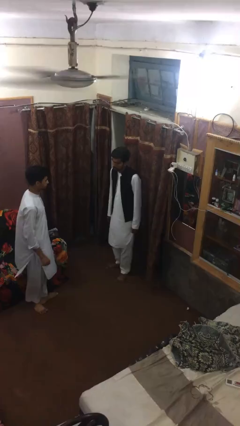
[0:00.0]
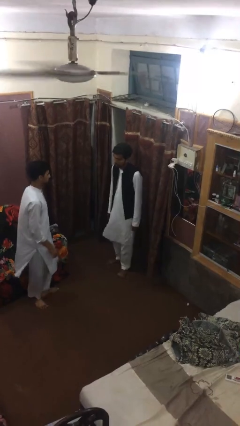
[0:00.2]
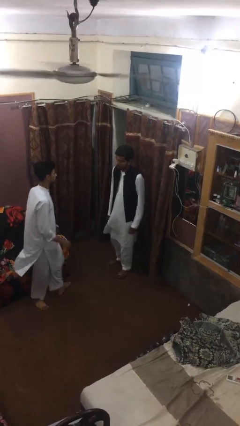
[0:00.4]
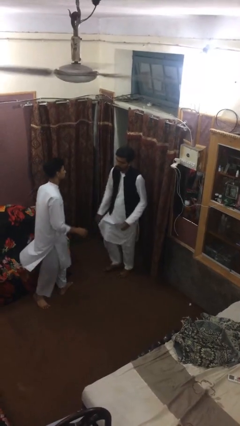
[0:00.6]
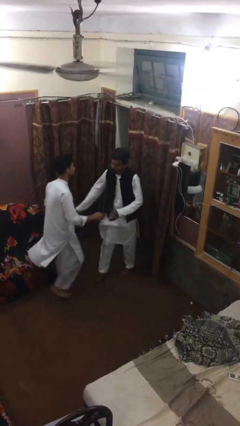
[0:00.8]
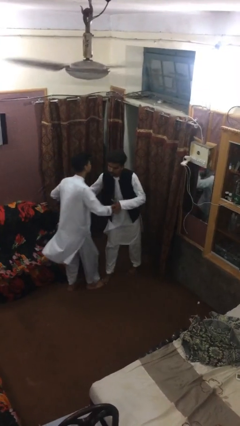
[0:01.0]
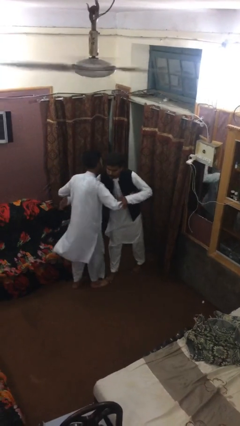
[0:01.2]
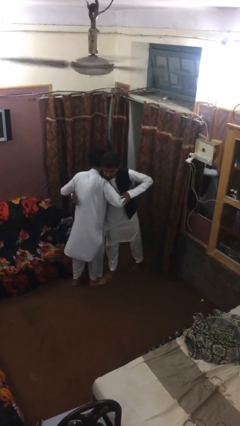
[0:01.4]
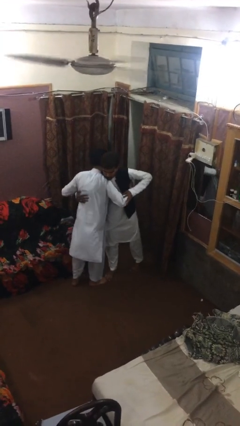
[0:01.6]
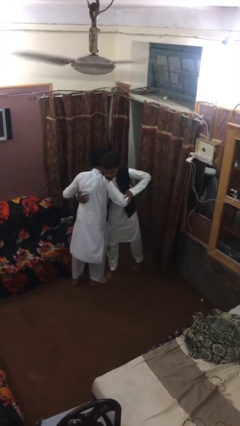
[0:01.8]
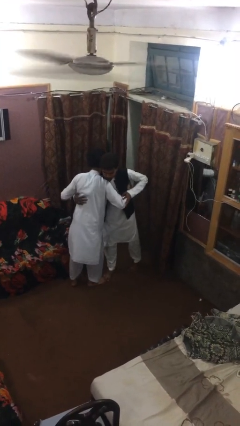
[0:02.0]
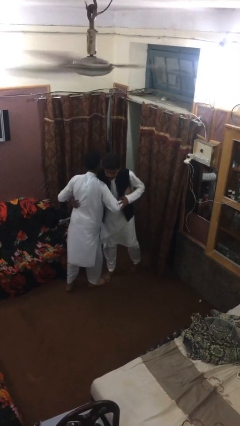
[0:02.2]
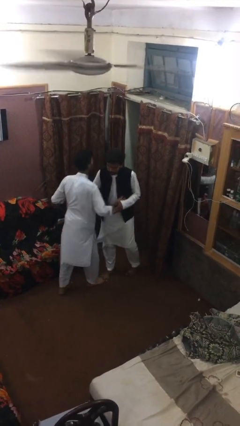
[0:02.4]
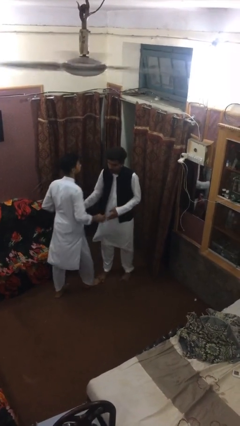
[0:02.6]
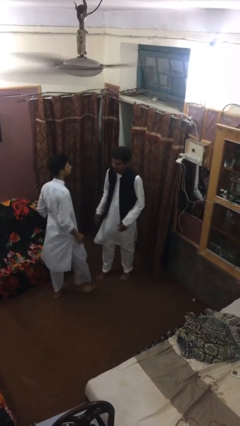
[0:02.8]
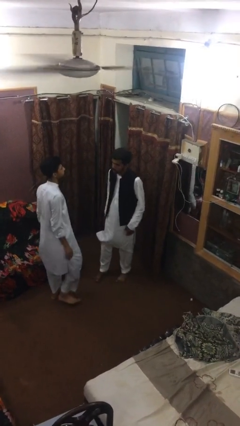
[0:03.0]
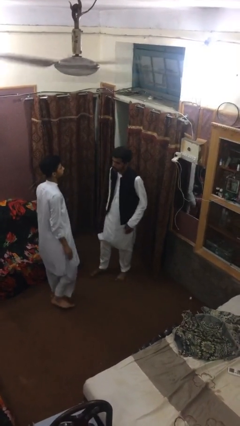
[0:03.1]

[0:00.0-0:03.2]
person embraces person

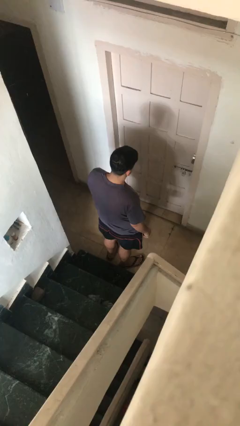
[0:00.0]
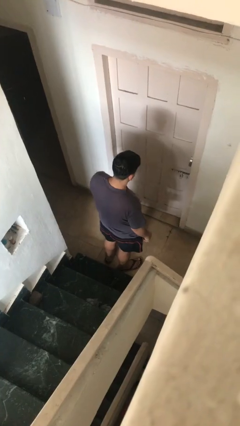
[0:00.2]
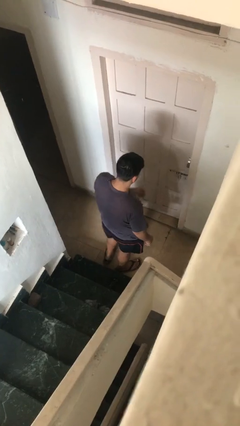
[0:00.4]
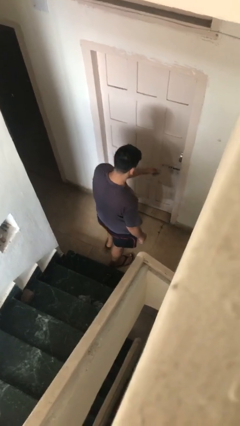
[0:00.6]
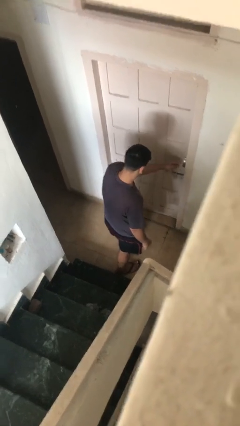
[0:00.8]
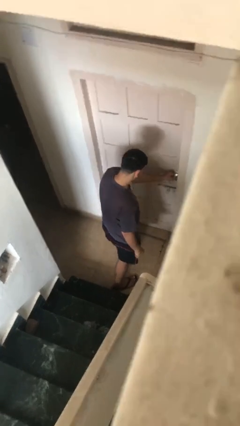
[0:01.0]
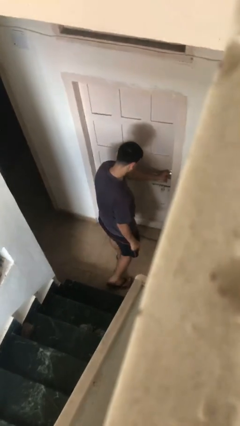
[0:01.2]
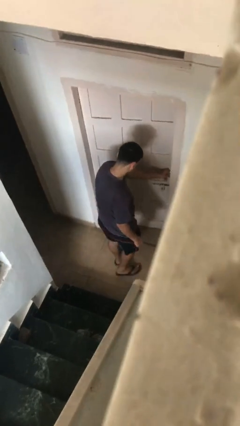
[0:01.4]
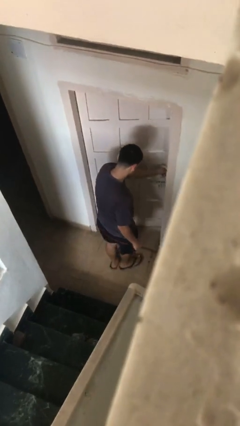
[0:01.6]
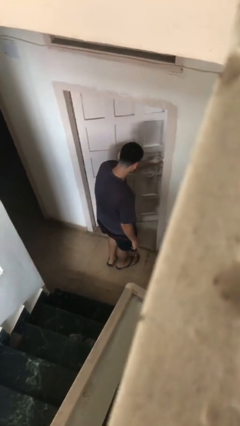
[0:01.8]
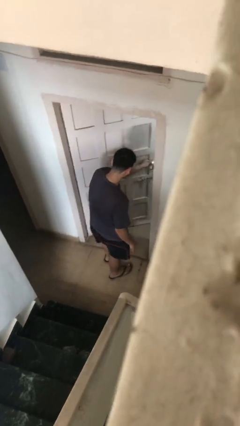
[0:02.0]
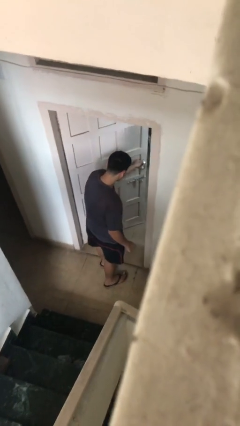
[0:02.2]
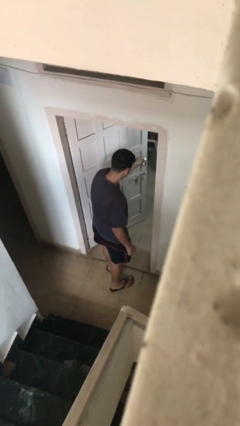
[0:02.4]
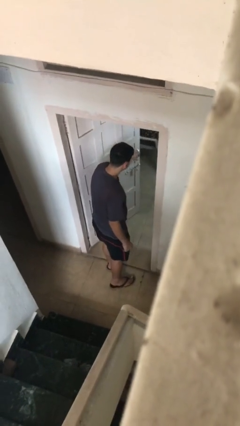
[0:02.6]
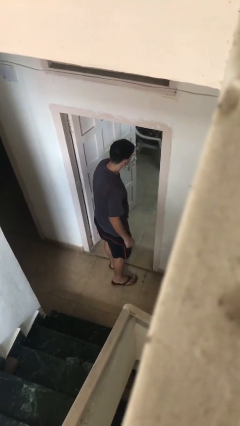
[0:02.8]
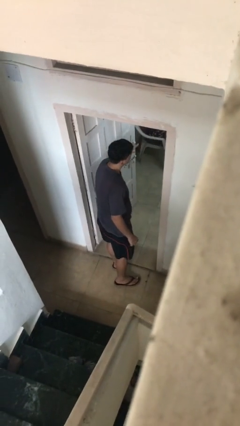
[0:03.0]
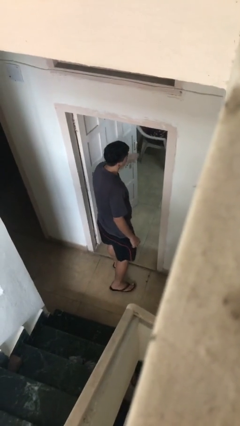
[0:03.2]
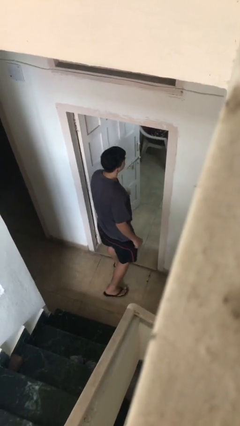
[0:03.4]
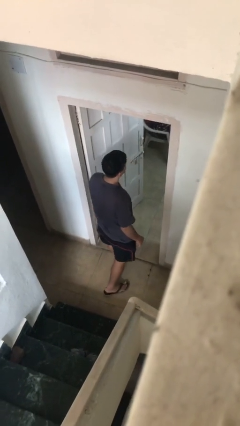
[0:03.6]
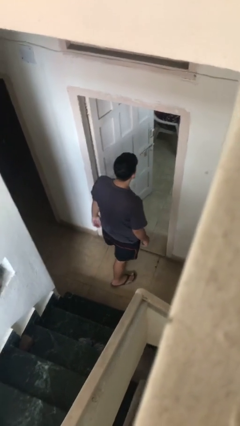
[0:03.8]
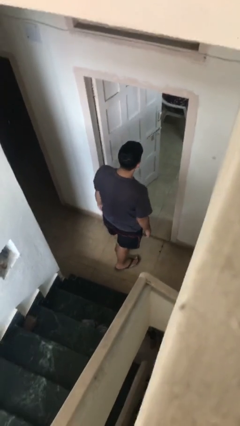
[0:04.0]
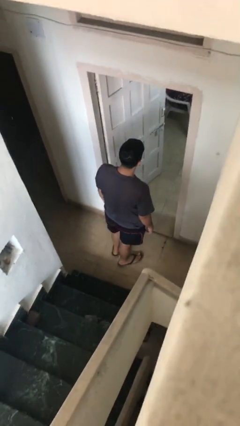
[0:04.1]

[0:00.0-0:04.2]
person opens facility door

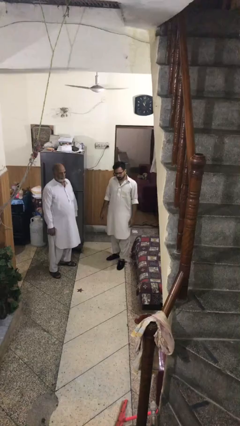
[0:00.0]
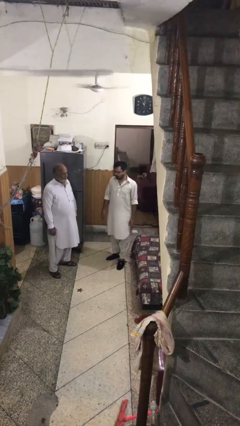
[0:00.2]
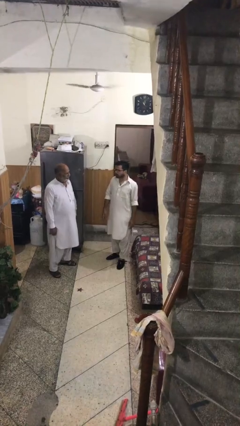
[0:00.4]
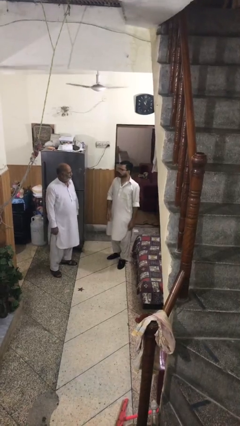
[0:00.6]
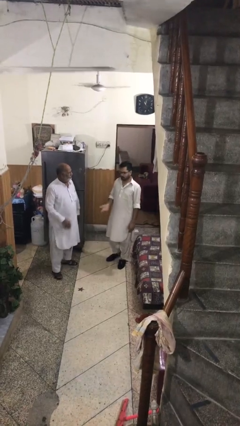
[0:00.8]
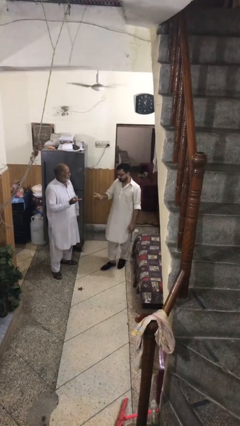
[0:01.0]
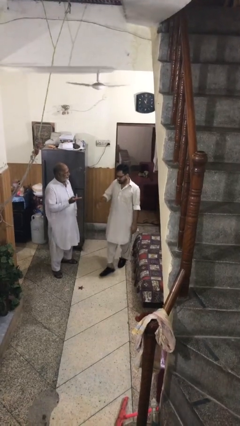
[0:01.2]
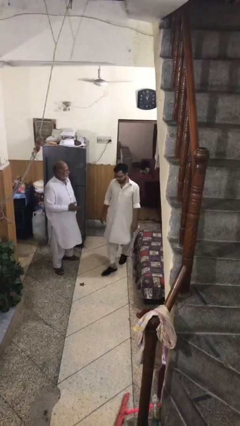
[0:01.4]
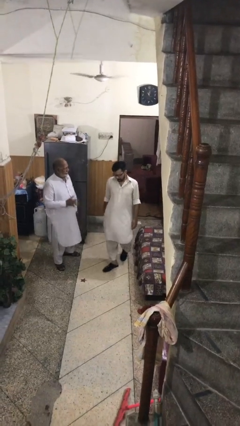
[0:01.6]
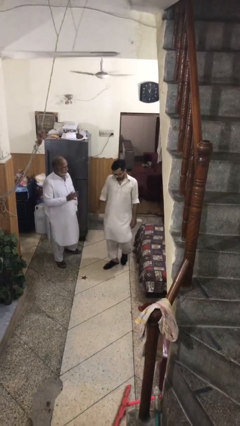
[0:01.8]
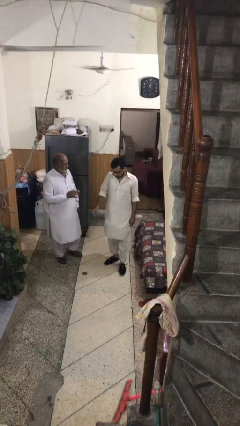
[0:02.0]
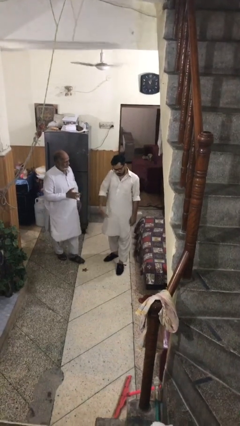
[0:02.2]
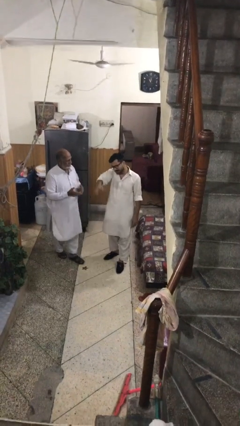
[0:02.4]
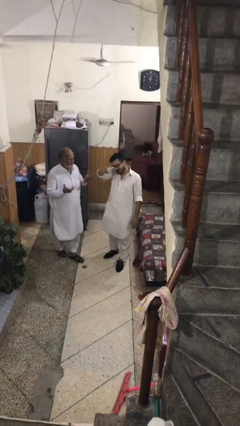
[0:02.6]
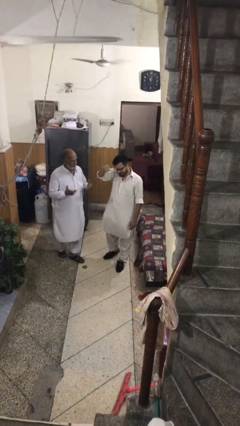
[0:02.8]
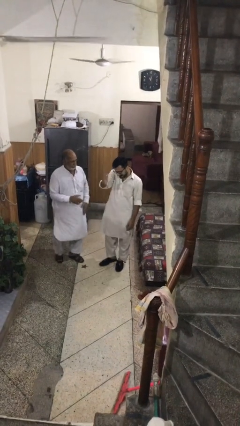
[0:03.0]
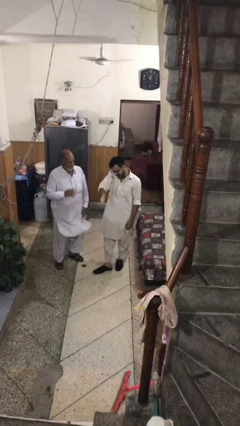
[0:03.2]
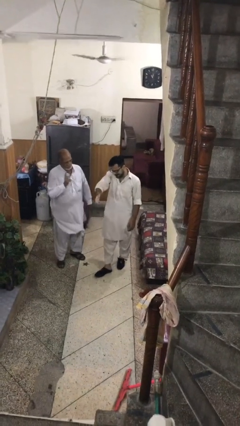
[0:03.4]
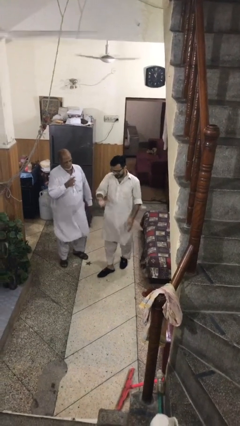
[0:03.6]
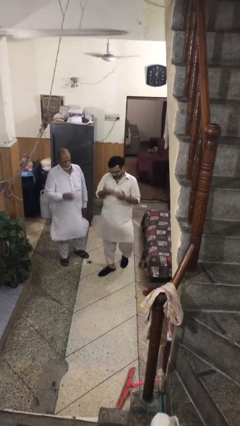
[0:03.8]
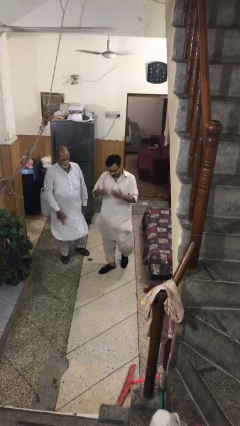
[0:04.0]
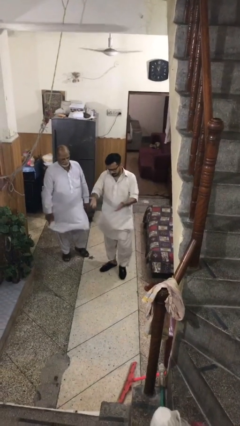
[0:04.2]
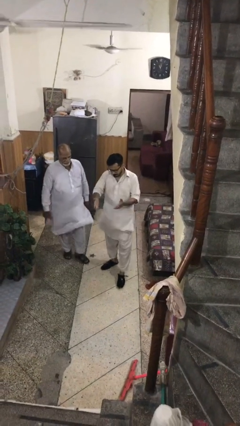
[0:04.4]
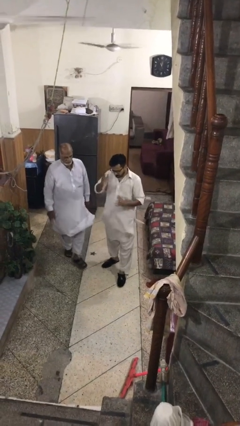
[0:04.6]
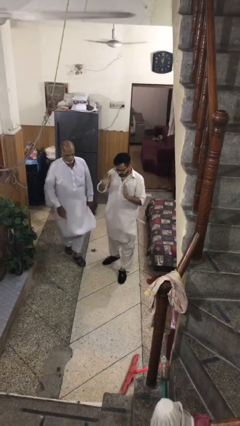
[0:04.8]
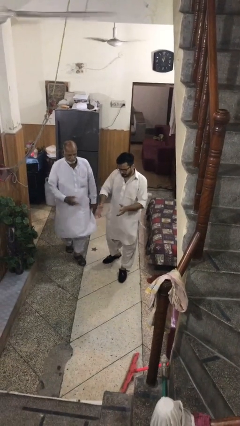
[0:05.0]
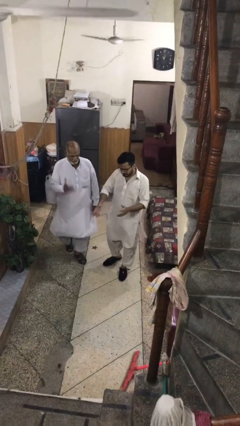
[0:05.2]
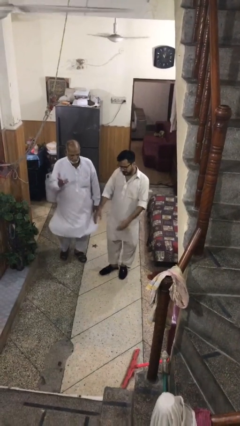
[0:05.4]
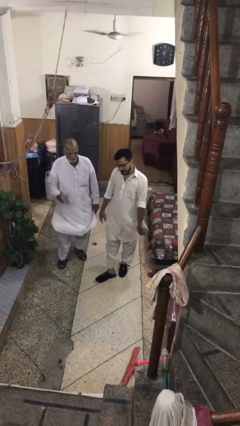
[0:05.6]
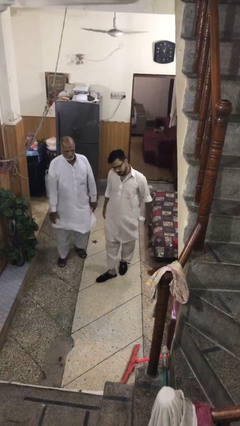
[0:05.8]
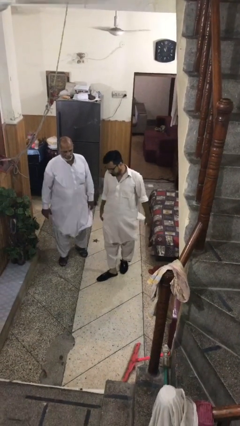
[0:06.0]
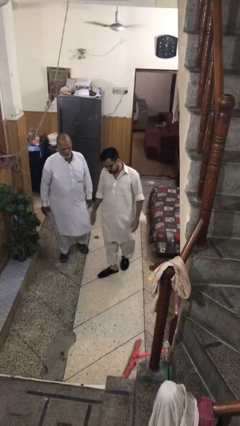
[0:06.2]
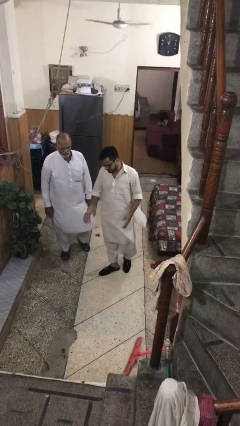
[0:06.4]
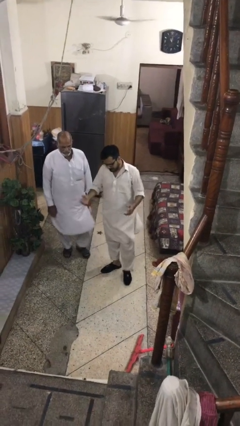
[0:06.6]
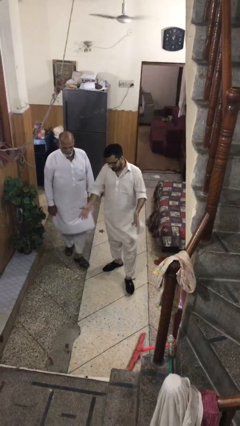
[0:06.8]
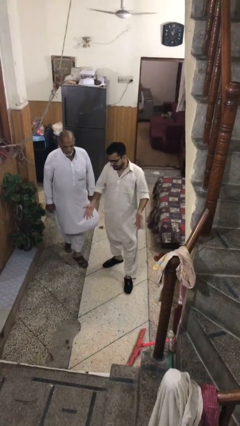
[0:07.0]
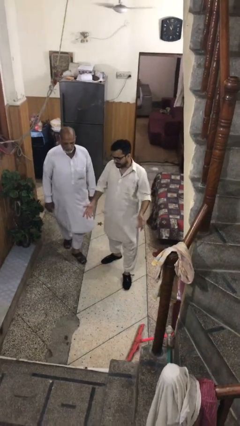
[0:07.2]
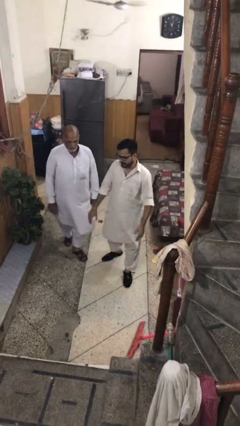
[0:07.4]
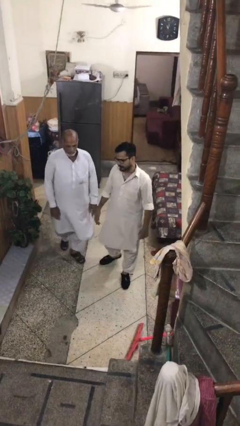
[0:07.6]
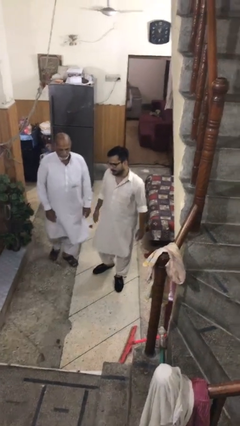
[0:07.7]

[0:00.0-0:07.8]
person talks to person

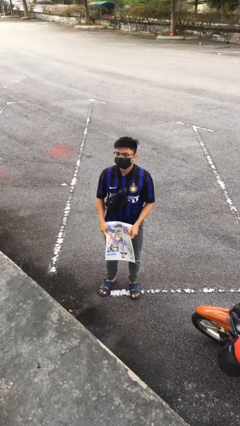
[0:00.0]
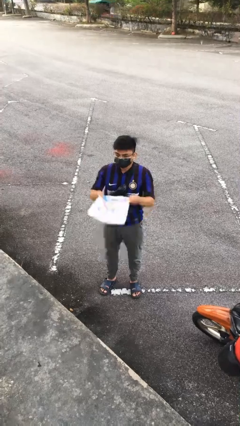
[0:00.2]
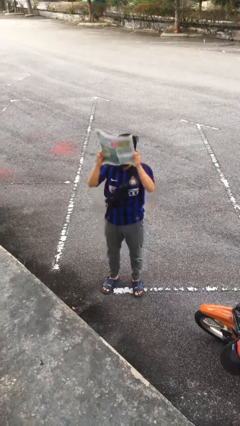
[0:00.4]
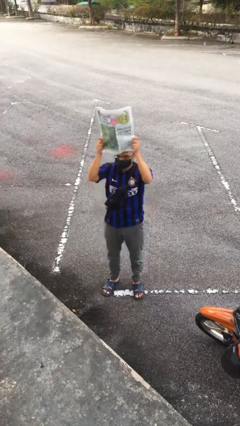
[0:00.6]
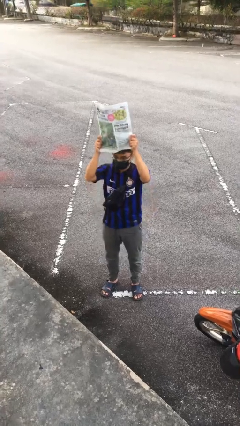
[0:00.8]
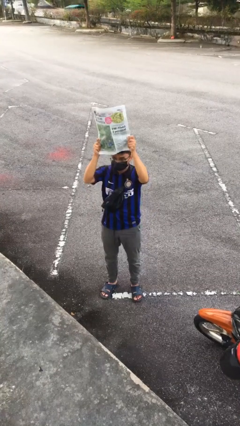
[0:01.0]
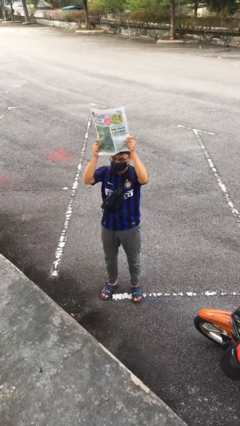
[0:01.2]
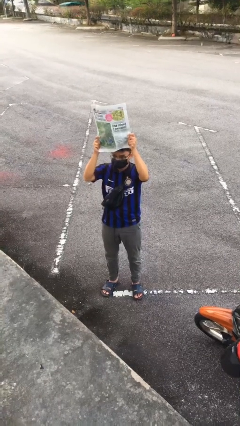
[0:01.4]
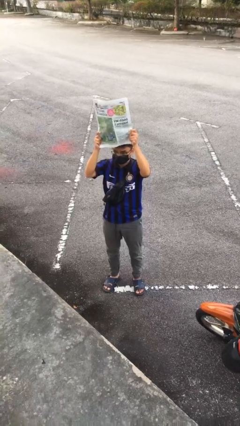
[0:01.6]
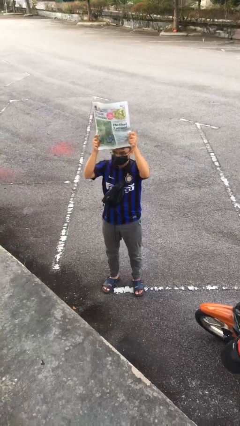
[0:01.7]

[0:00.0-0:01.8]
person holds object above head

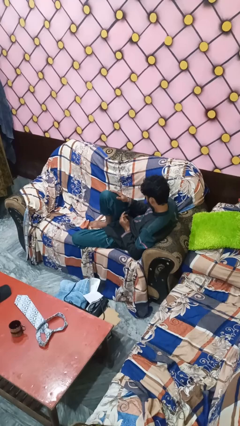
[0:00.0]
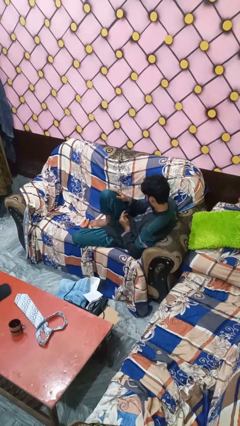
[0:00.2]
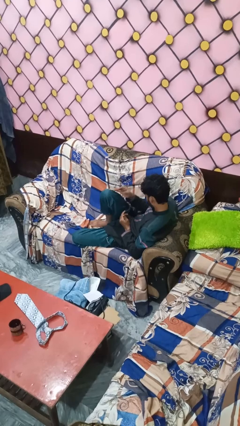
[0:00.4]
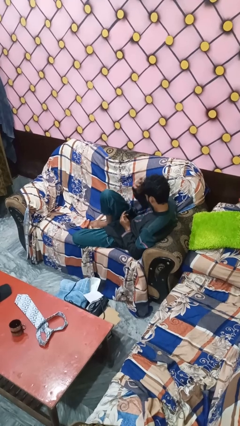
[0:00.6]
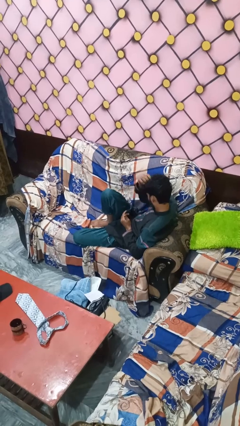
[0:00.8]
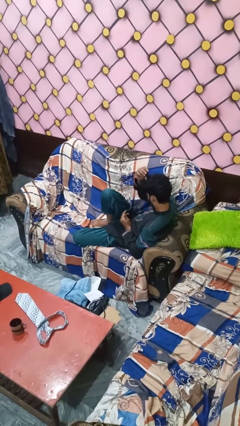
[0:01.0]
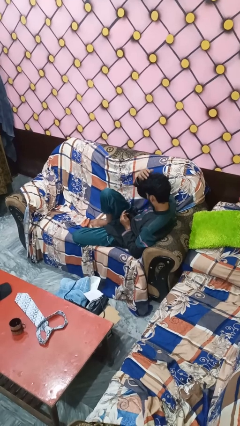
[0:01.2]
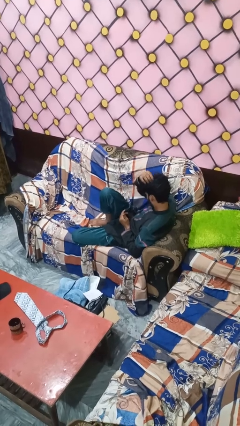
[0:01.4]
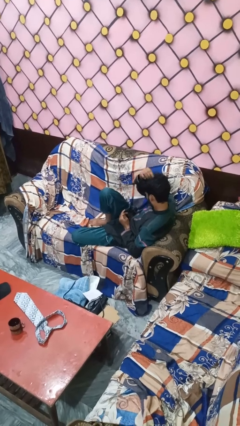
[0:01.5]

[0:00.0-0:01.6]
person strokes hair
